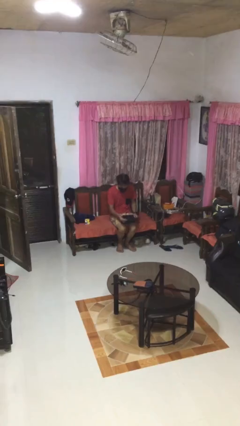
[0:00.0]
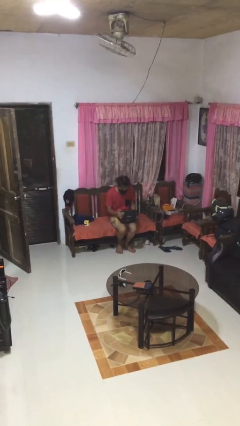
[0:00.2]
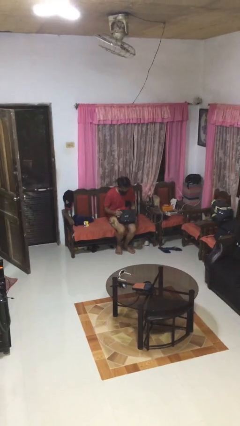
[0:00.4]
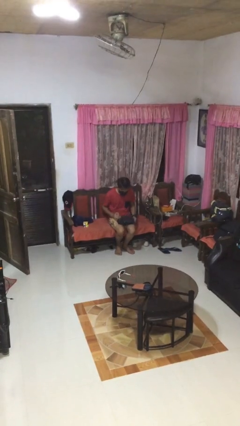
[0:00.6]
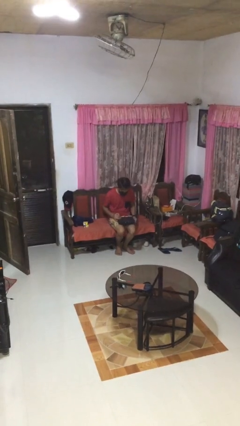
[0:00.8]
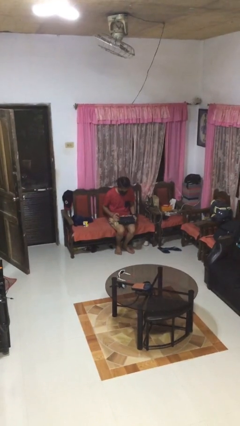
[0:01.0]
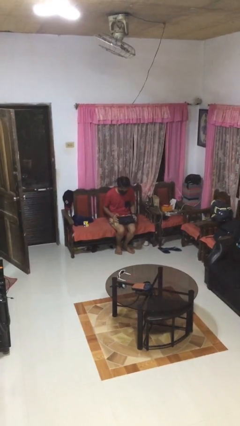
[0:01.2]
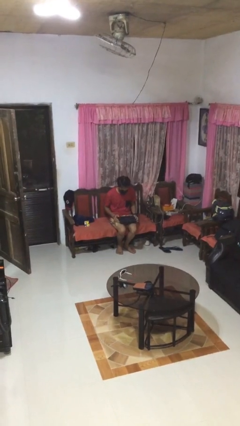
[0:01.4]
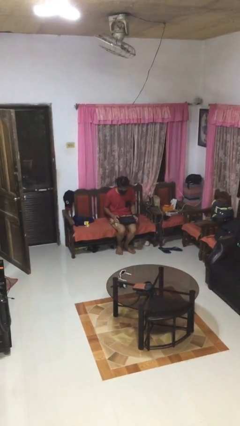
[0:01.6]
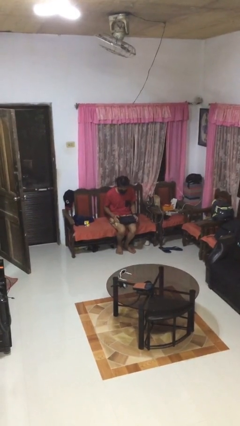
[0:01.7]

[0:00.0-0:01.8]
person closes laptop

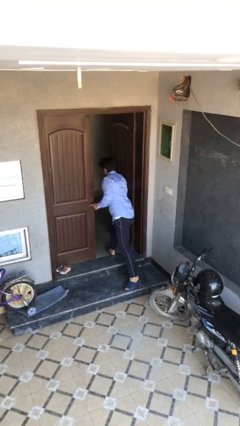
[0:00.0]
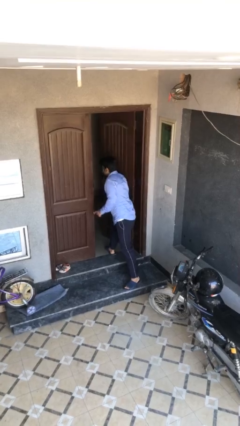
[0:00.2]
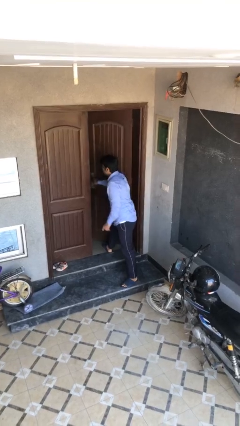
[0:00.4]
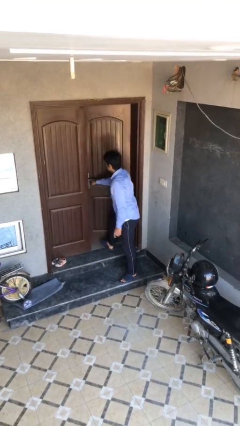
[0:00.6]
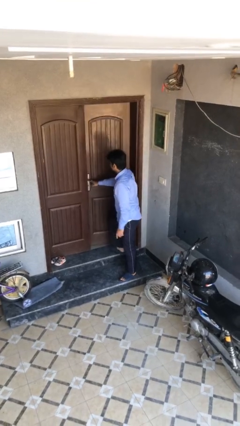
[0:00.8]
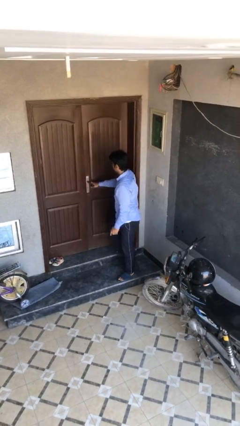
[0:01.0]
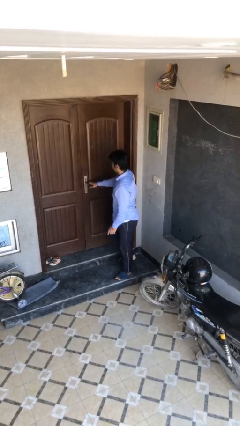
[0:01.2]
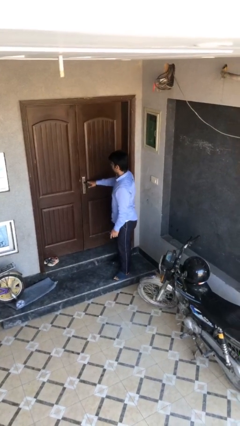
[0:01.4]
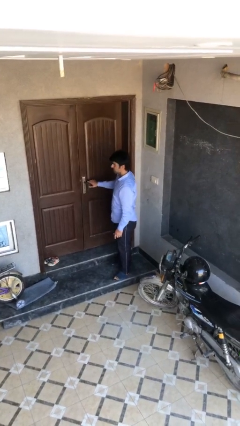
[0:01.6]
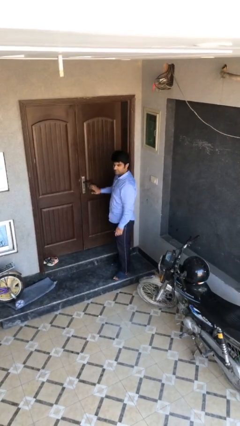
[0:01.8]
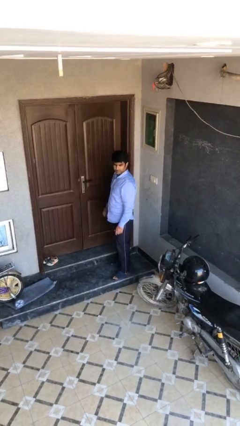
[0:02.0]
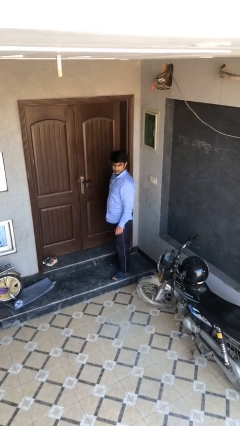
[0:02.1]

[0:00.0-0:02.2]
person closes facility door

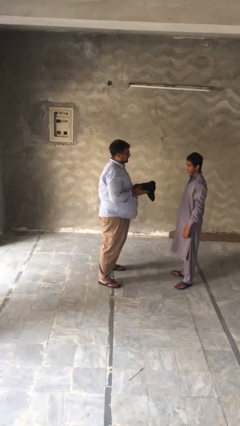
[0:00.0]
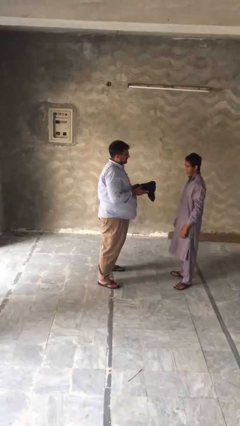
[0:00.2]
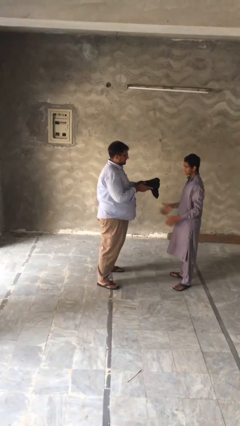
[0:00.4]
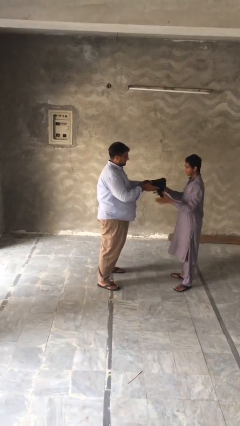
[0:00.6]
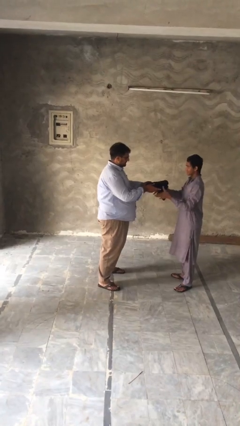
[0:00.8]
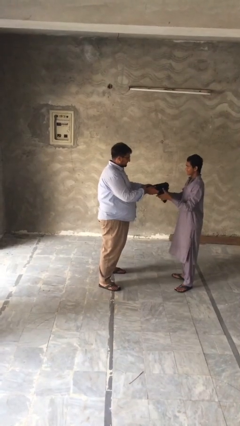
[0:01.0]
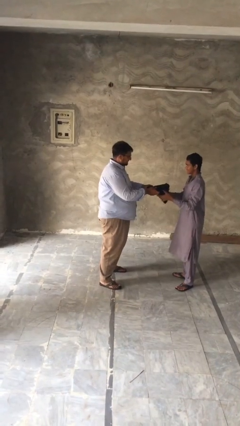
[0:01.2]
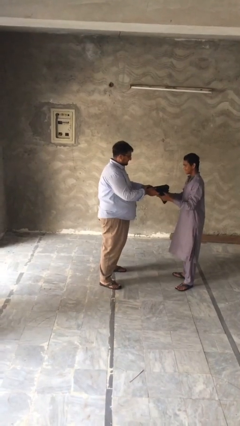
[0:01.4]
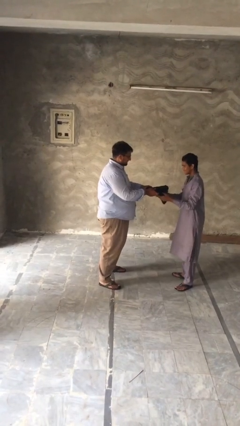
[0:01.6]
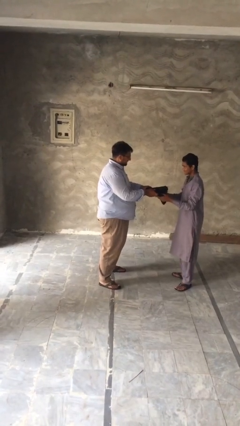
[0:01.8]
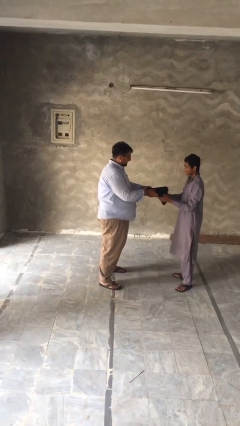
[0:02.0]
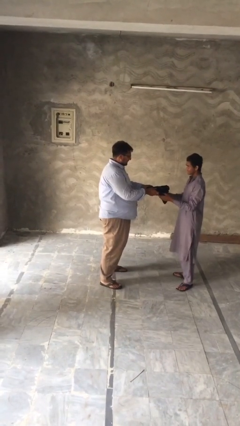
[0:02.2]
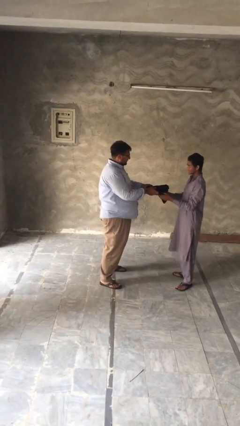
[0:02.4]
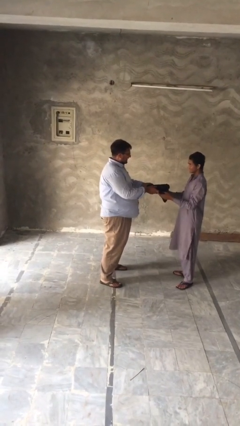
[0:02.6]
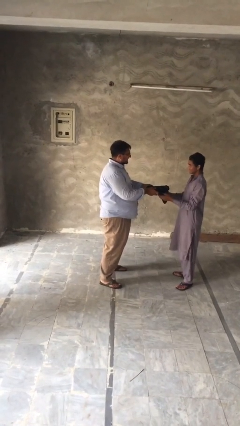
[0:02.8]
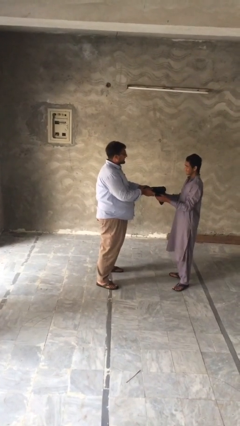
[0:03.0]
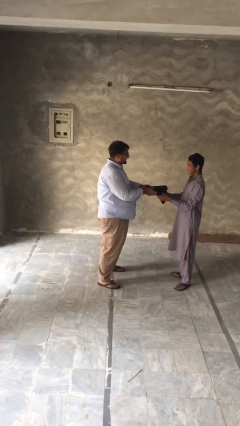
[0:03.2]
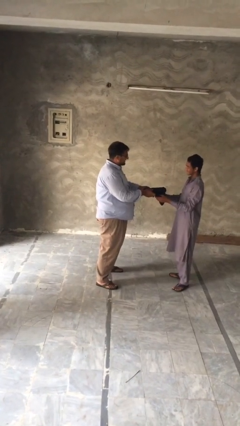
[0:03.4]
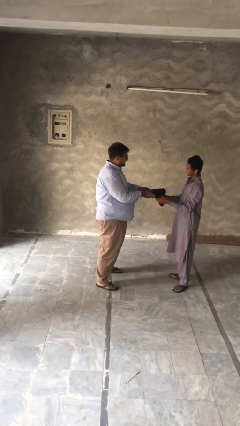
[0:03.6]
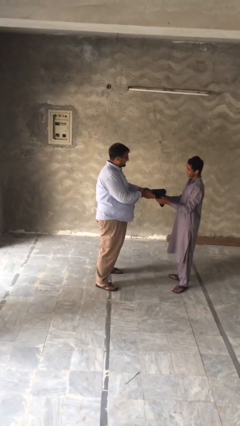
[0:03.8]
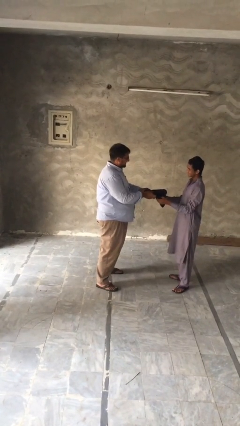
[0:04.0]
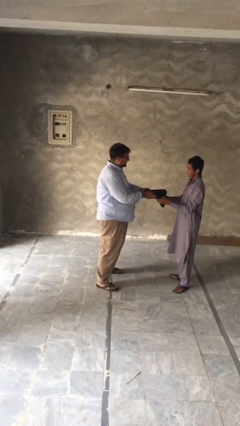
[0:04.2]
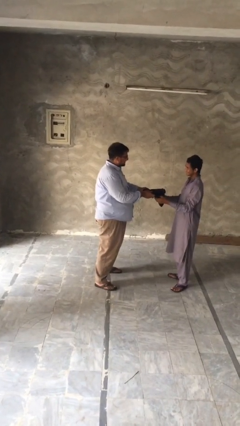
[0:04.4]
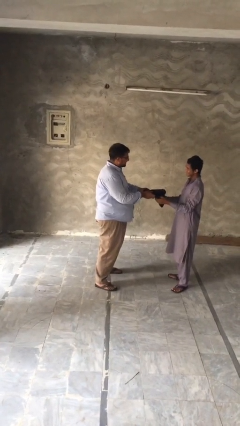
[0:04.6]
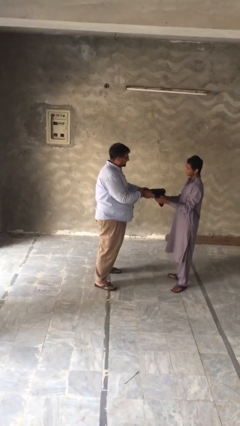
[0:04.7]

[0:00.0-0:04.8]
person transfers object to person

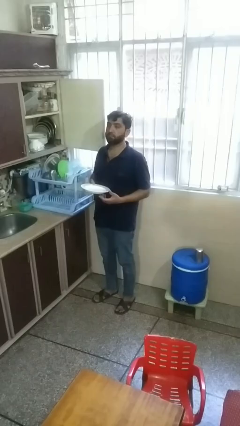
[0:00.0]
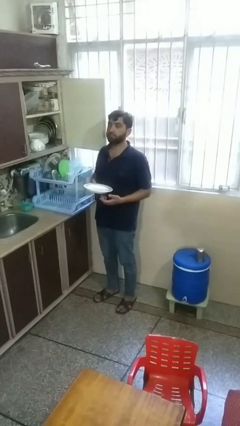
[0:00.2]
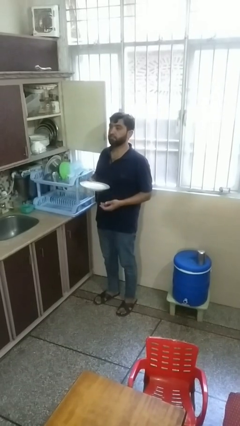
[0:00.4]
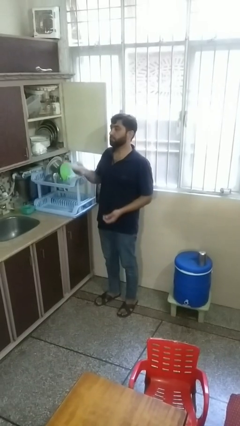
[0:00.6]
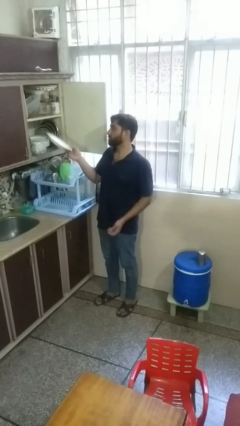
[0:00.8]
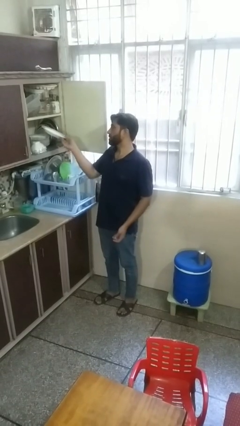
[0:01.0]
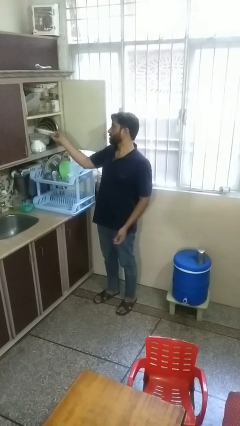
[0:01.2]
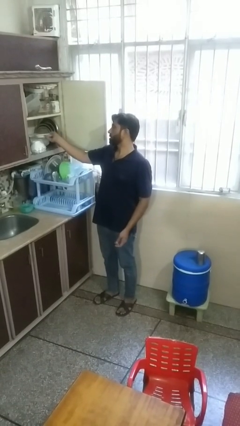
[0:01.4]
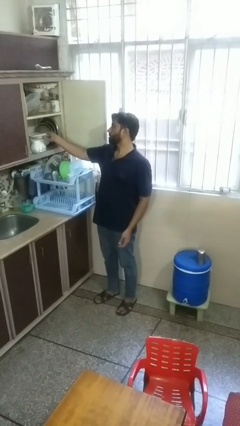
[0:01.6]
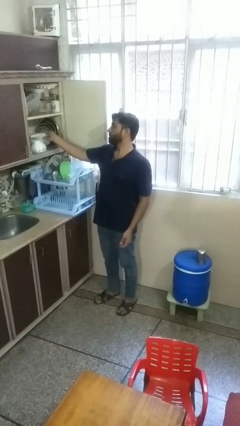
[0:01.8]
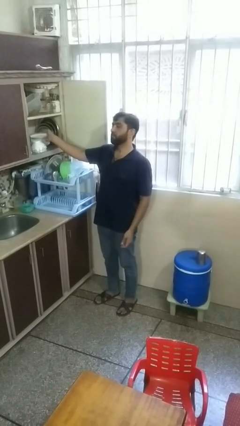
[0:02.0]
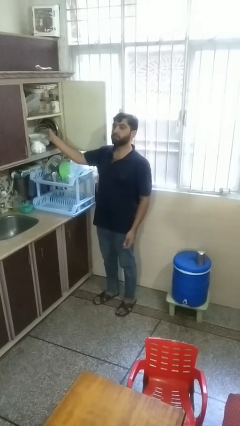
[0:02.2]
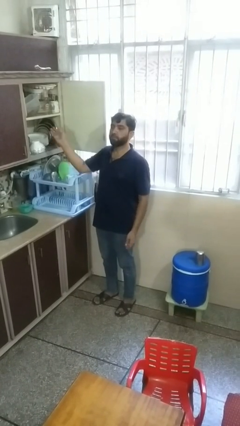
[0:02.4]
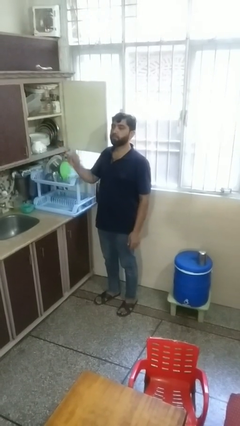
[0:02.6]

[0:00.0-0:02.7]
person puts object in cabinet

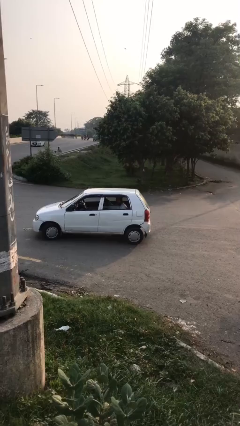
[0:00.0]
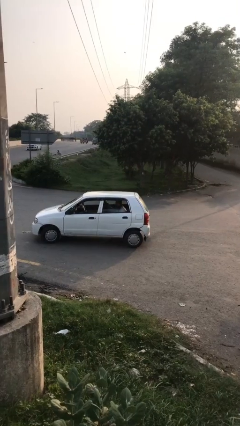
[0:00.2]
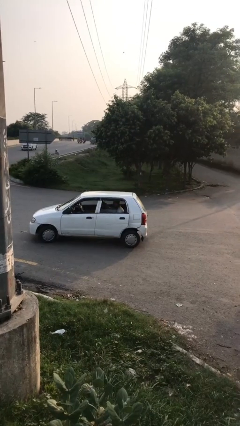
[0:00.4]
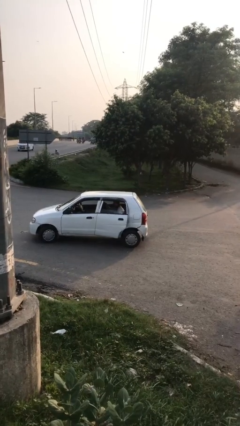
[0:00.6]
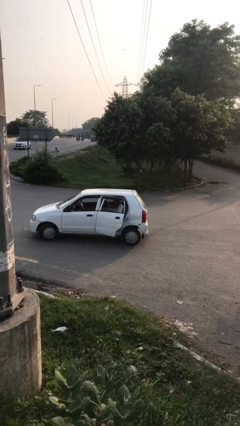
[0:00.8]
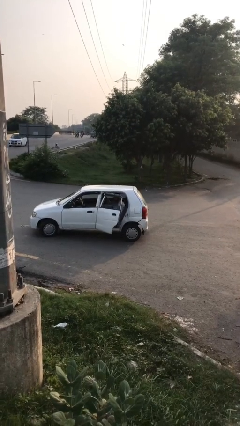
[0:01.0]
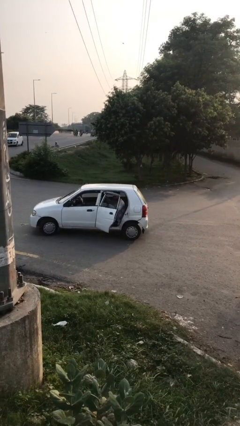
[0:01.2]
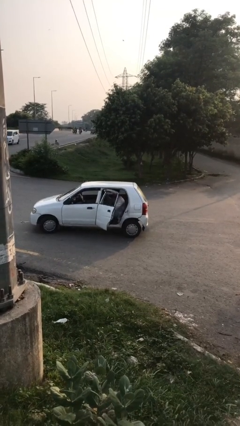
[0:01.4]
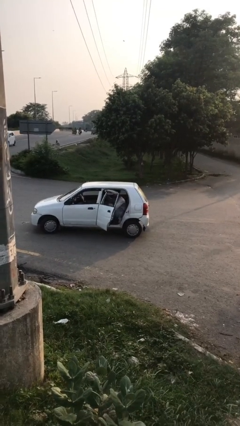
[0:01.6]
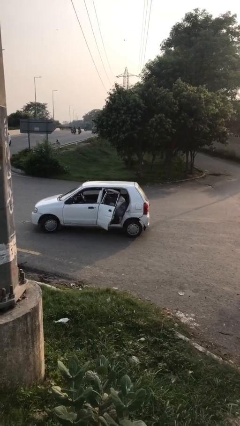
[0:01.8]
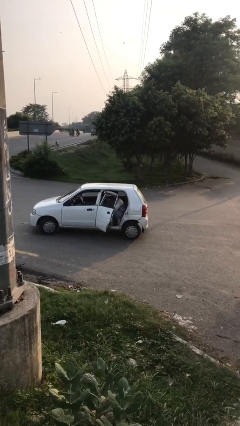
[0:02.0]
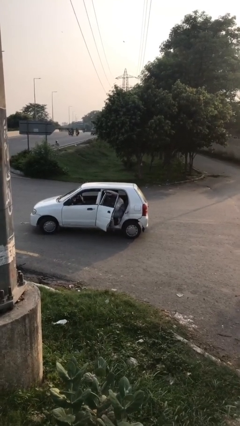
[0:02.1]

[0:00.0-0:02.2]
person opens car door

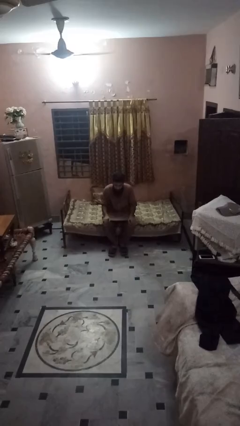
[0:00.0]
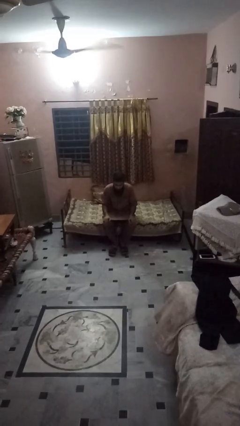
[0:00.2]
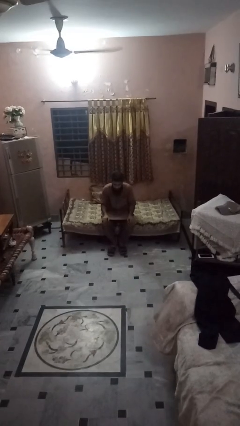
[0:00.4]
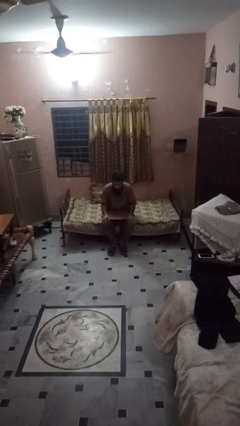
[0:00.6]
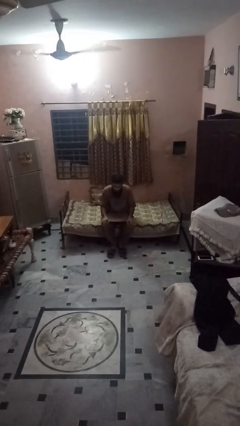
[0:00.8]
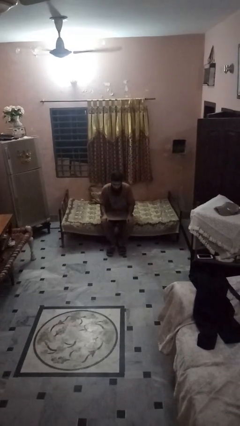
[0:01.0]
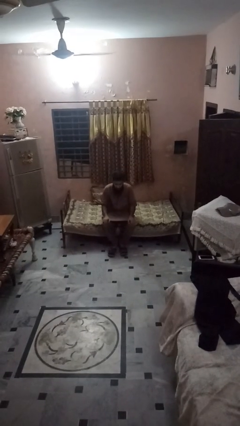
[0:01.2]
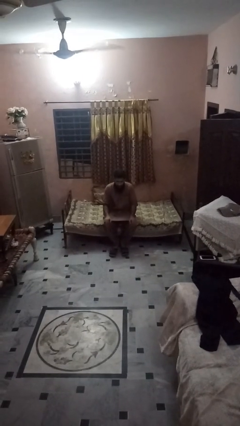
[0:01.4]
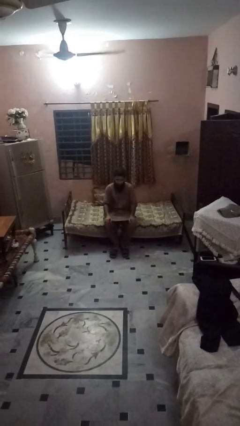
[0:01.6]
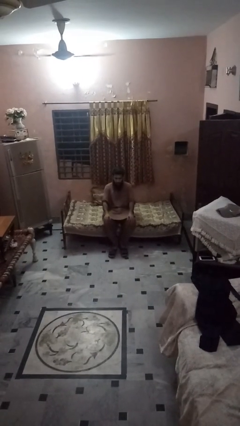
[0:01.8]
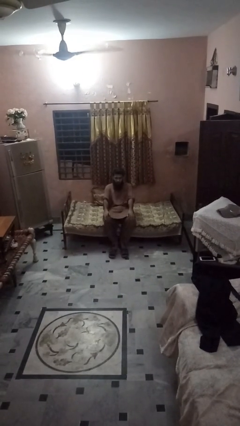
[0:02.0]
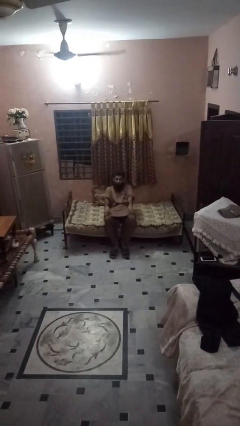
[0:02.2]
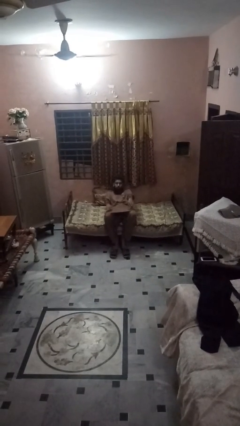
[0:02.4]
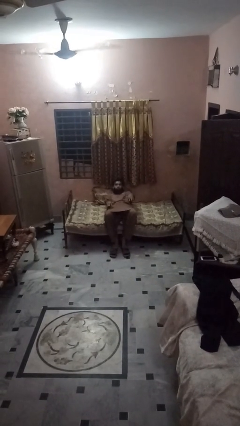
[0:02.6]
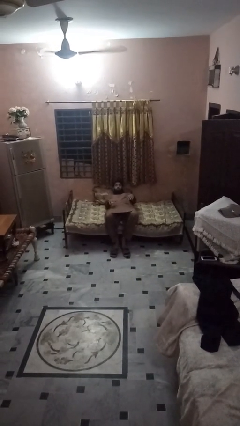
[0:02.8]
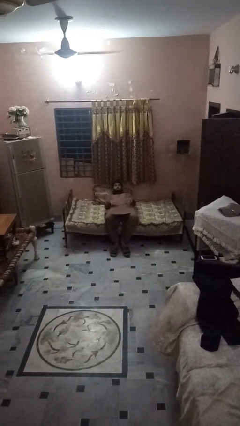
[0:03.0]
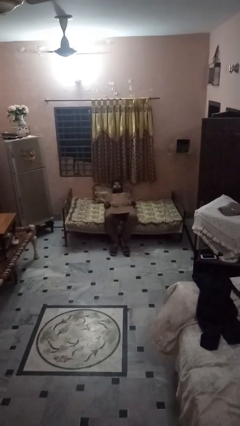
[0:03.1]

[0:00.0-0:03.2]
person lies down on bed
